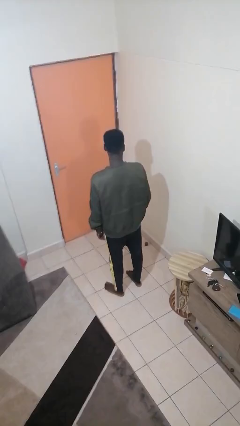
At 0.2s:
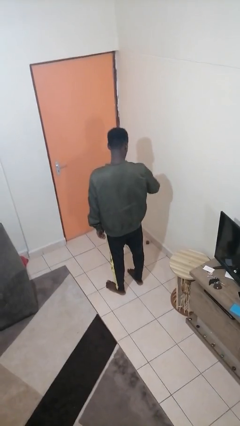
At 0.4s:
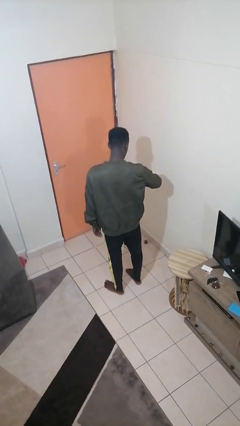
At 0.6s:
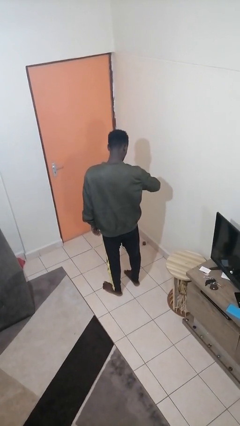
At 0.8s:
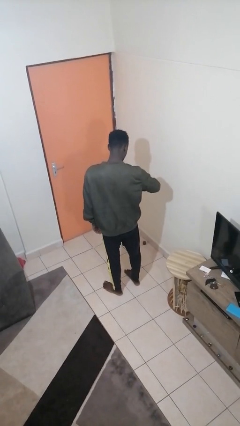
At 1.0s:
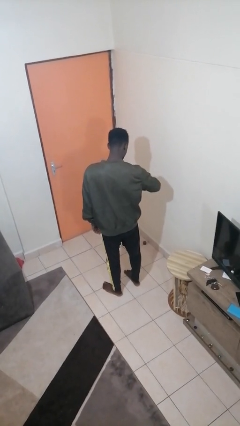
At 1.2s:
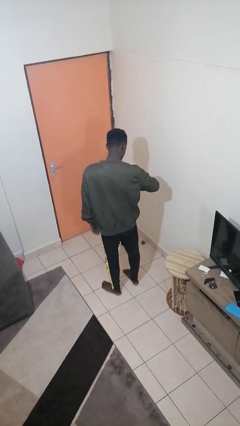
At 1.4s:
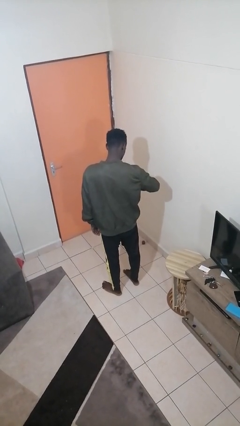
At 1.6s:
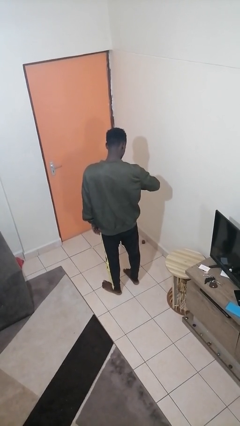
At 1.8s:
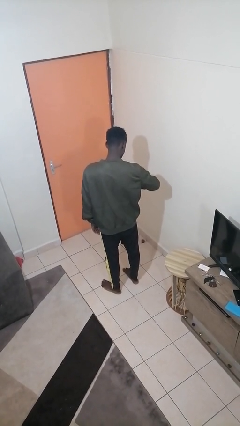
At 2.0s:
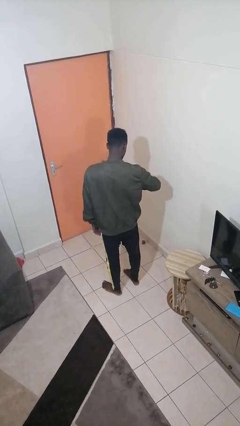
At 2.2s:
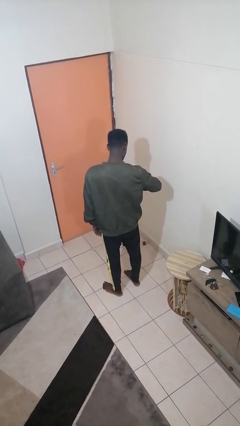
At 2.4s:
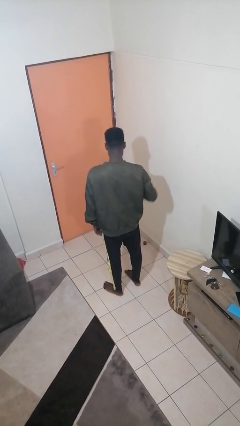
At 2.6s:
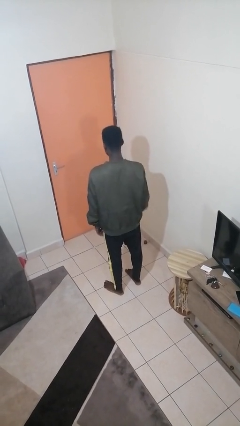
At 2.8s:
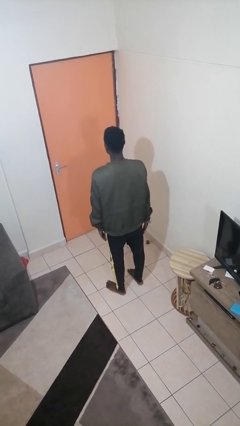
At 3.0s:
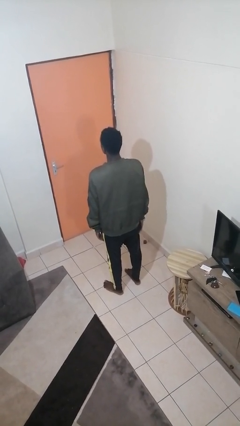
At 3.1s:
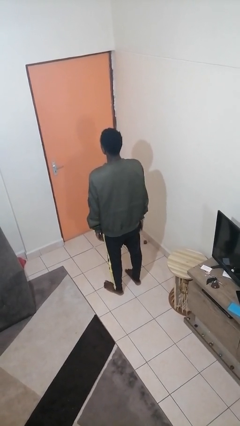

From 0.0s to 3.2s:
person looks at wristwatch

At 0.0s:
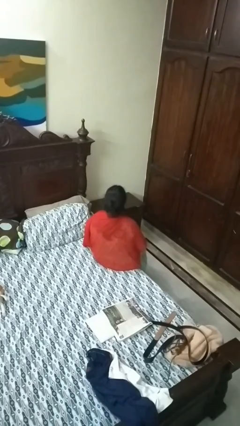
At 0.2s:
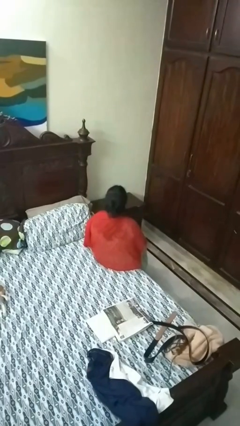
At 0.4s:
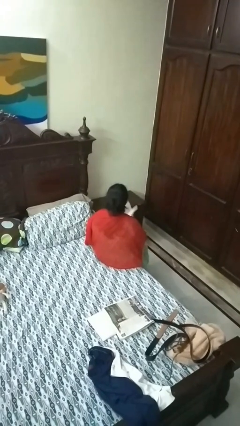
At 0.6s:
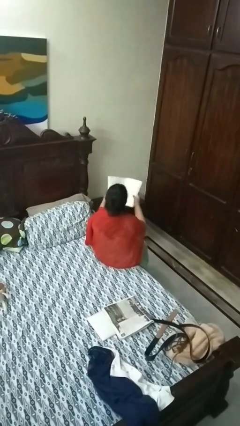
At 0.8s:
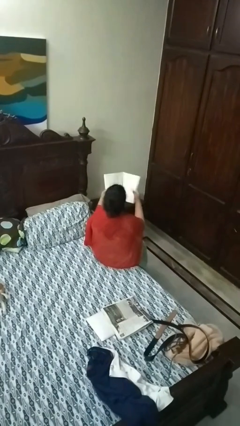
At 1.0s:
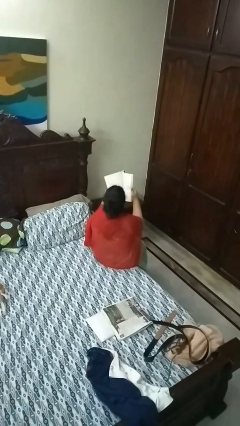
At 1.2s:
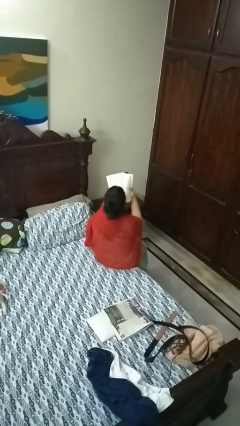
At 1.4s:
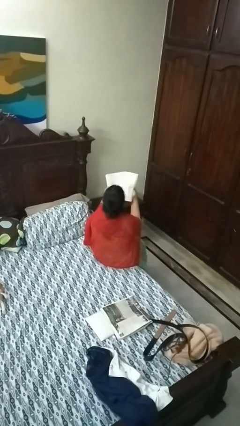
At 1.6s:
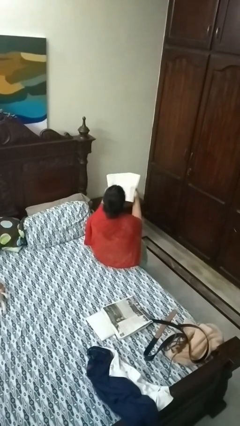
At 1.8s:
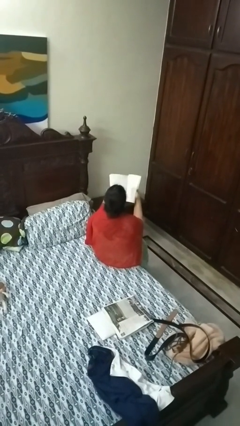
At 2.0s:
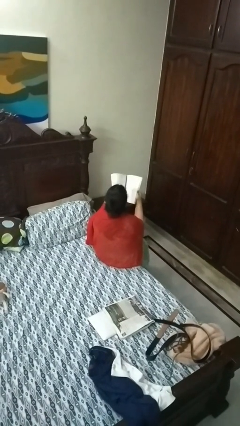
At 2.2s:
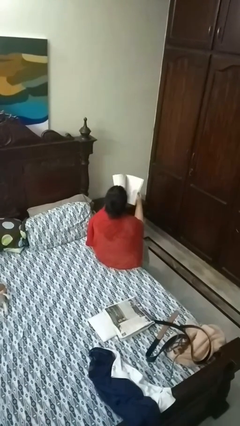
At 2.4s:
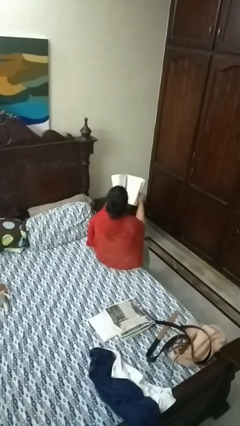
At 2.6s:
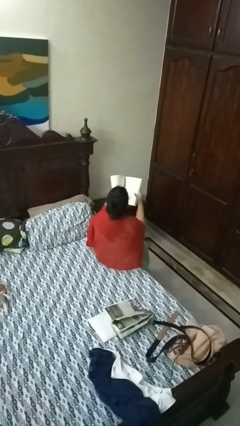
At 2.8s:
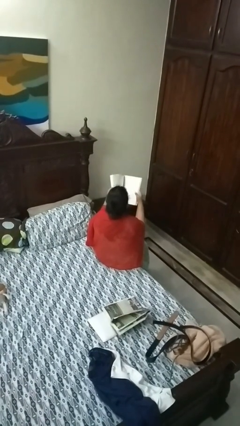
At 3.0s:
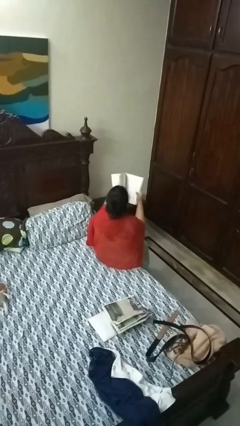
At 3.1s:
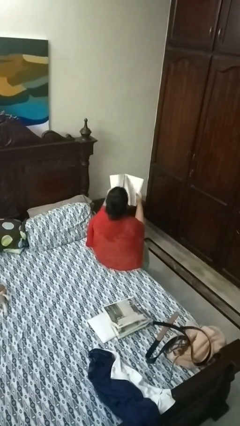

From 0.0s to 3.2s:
person reads magazine

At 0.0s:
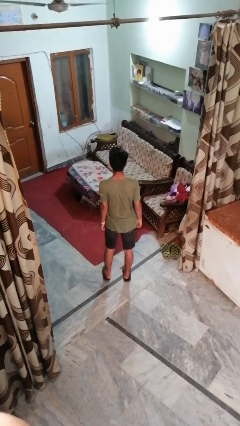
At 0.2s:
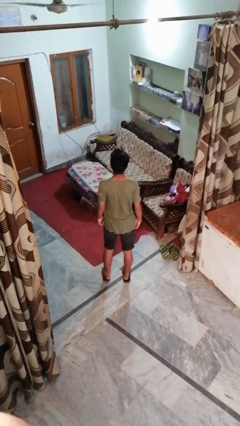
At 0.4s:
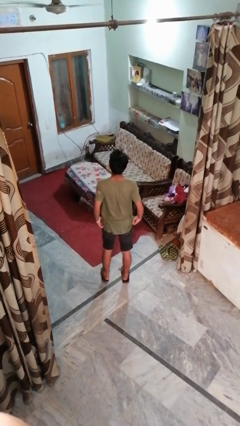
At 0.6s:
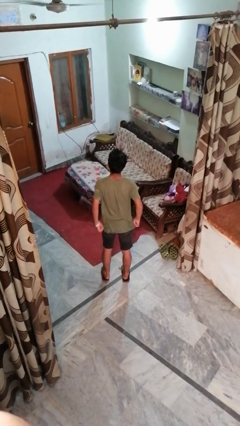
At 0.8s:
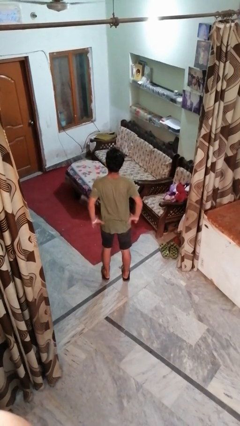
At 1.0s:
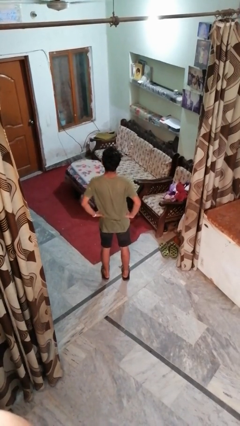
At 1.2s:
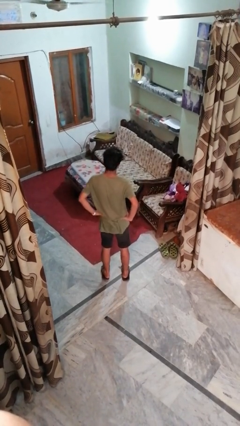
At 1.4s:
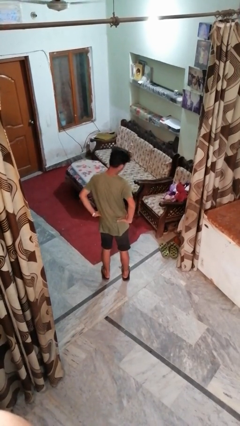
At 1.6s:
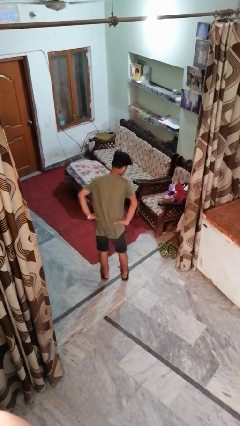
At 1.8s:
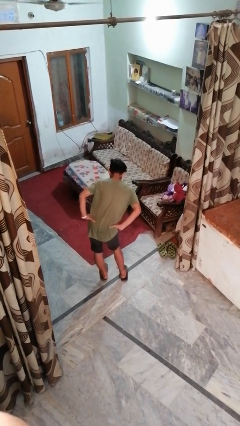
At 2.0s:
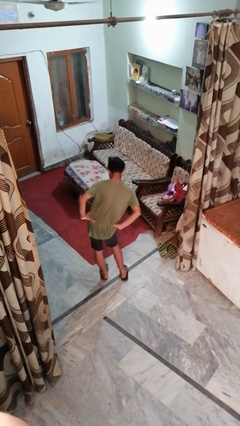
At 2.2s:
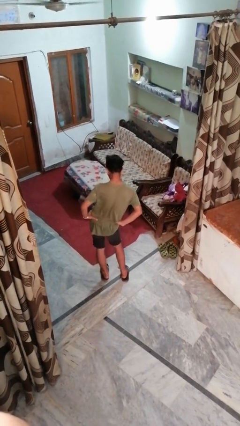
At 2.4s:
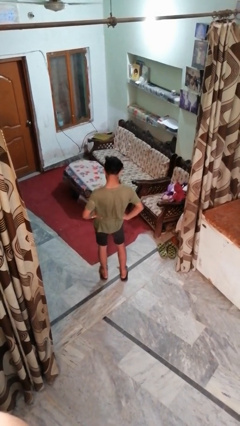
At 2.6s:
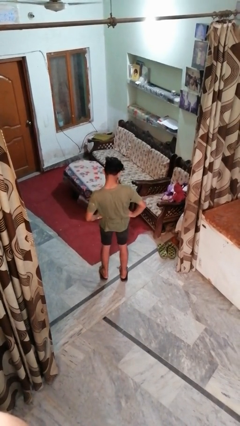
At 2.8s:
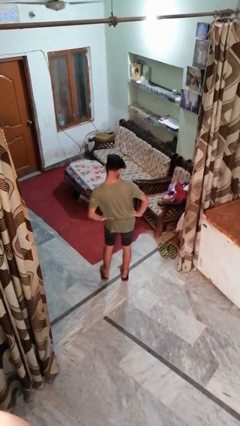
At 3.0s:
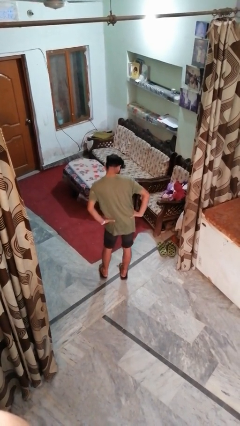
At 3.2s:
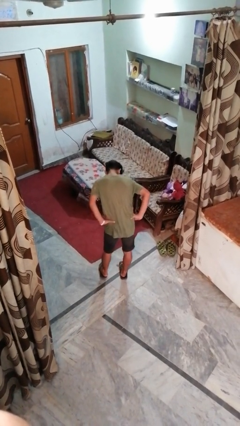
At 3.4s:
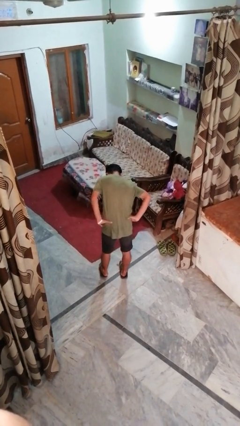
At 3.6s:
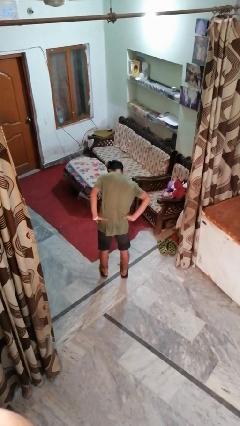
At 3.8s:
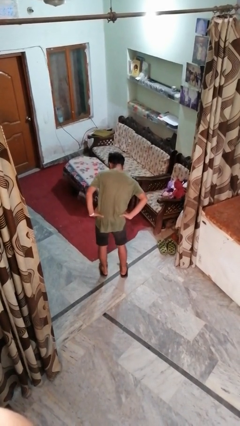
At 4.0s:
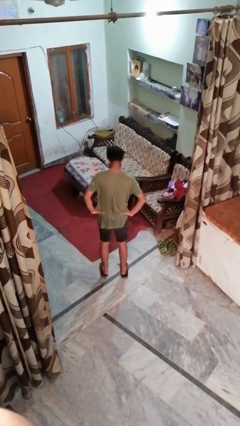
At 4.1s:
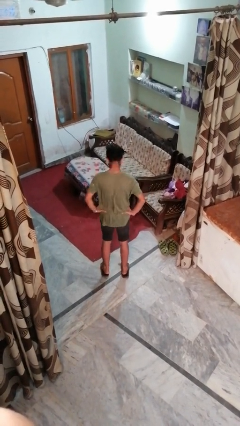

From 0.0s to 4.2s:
person wiggles hips

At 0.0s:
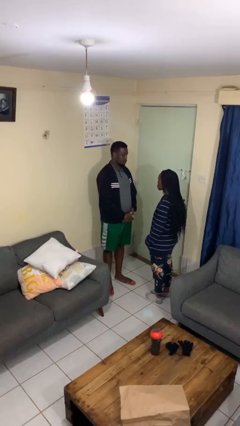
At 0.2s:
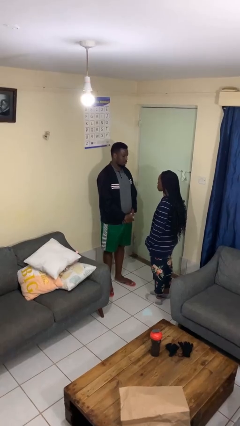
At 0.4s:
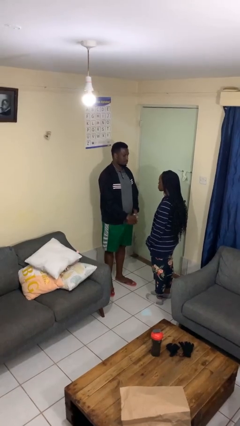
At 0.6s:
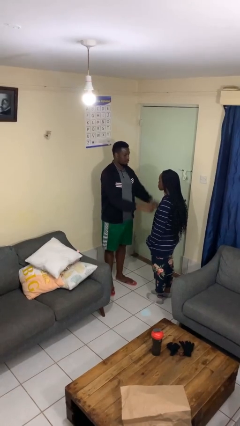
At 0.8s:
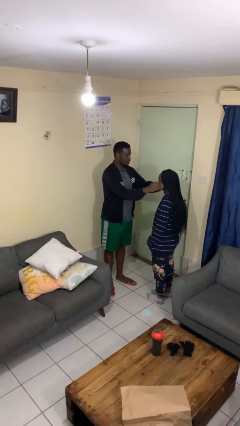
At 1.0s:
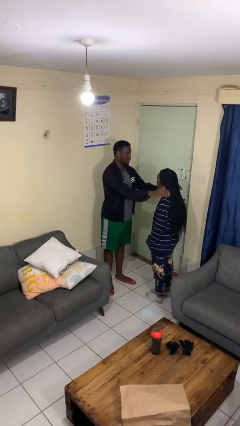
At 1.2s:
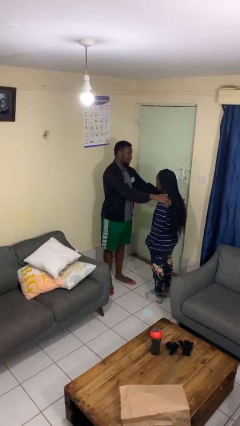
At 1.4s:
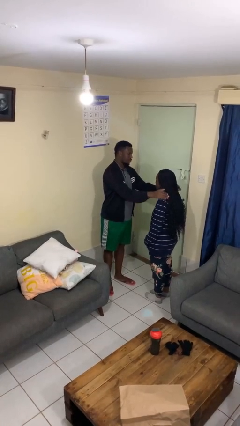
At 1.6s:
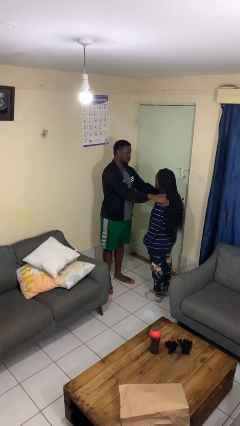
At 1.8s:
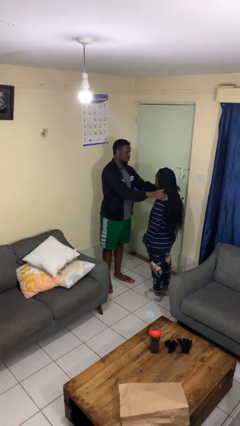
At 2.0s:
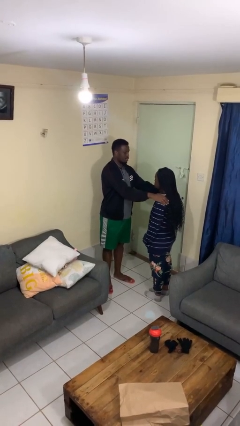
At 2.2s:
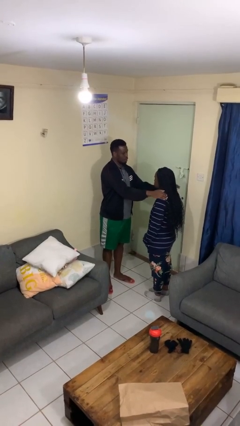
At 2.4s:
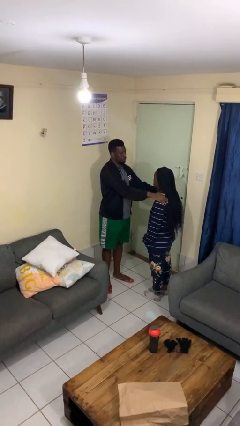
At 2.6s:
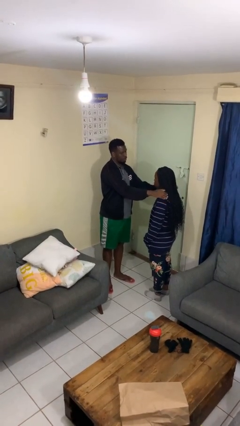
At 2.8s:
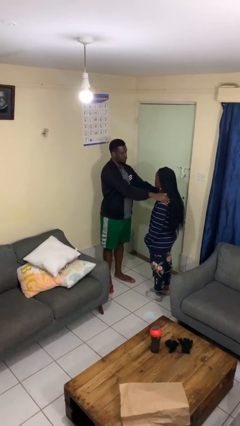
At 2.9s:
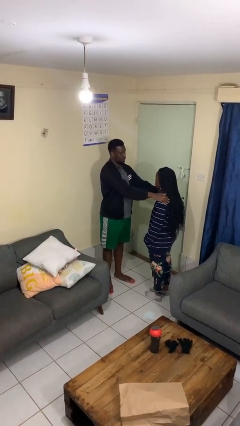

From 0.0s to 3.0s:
person pounds shoulders of person

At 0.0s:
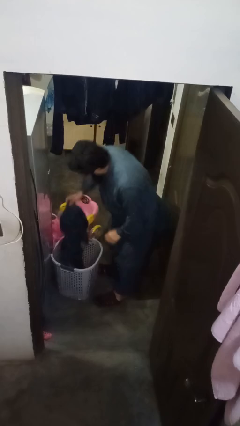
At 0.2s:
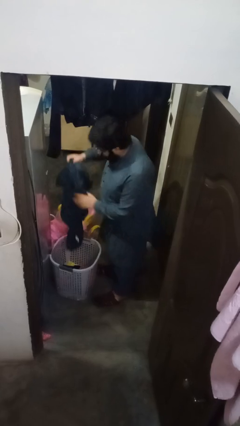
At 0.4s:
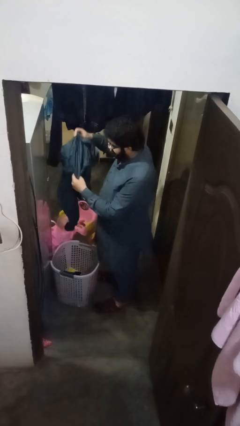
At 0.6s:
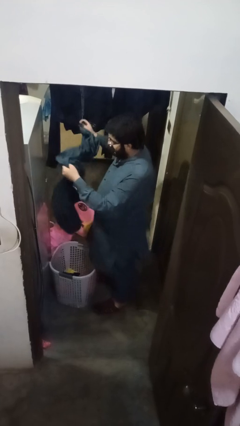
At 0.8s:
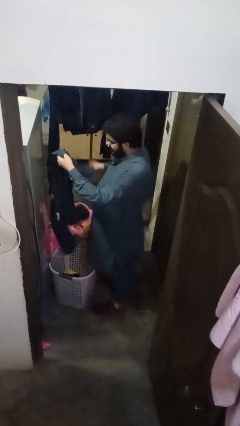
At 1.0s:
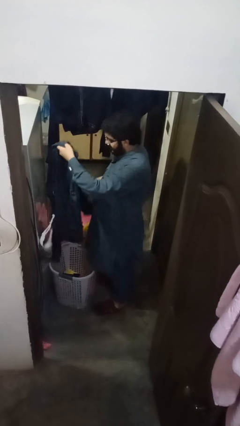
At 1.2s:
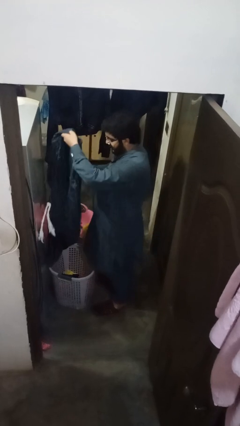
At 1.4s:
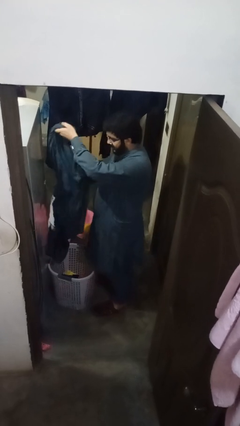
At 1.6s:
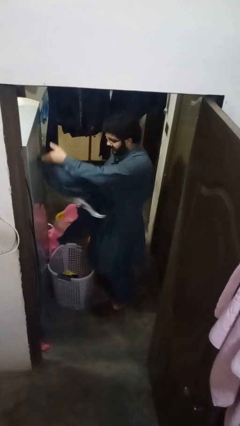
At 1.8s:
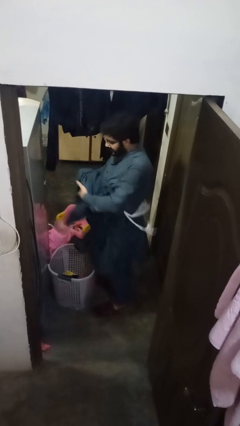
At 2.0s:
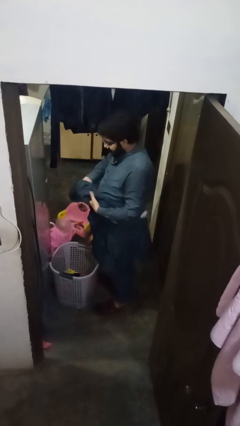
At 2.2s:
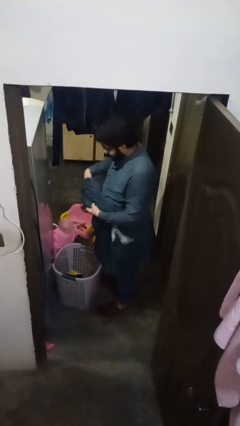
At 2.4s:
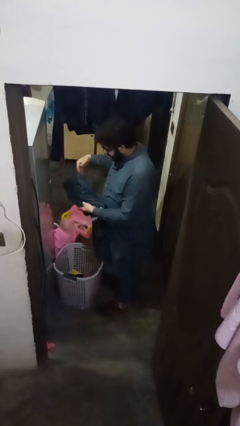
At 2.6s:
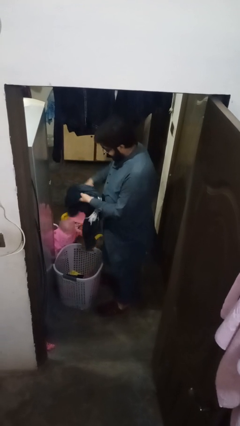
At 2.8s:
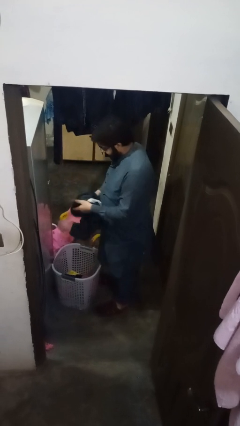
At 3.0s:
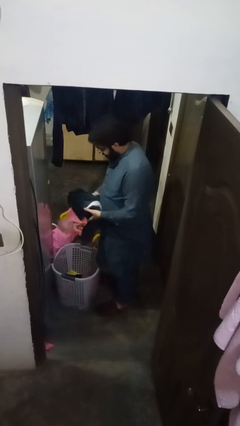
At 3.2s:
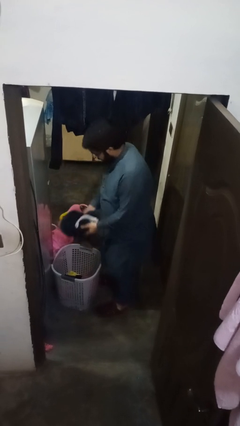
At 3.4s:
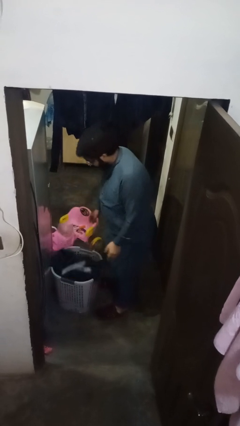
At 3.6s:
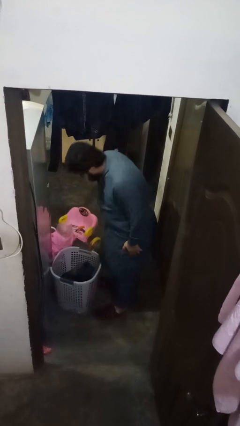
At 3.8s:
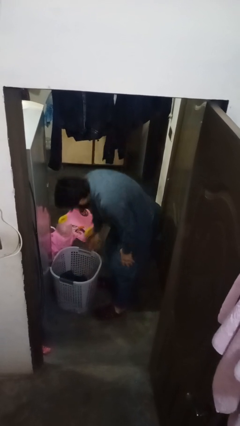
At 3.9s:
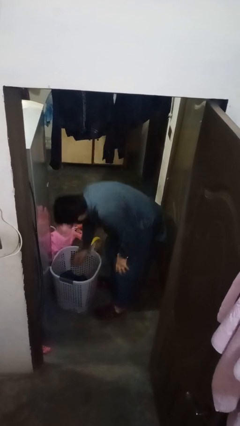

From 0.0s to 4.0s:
person folds pants

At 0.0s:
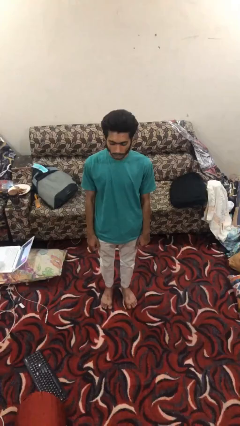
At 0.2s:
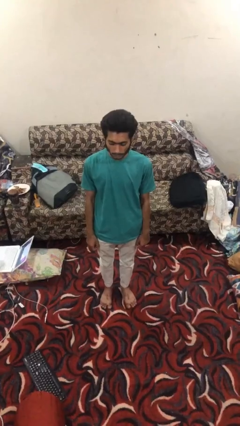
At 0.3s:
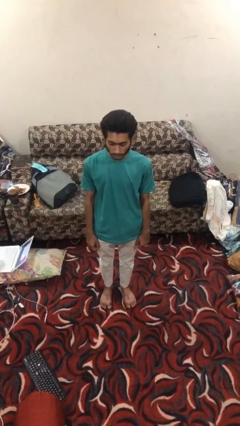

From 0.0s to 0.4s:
person sits crisscross
